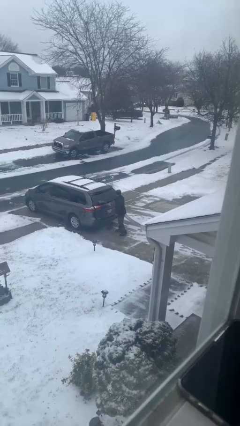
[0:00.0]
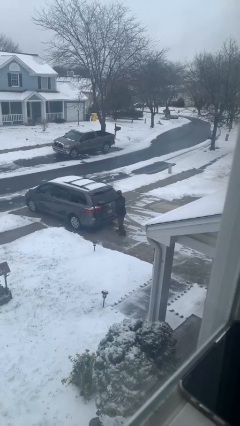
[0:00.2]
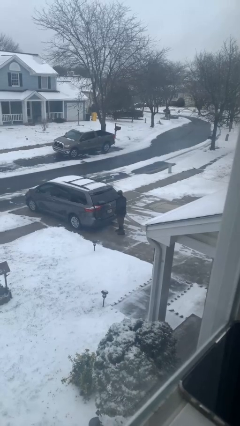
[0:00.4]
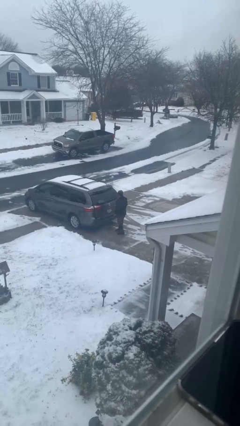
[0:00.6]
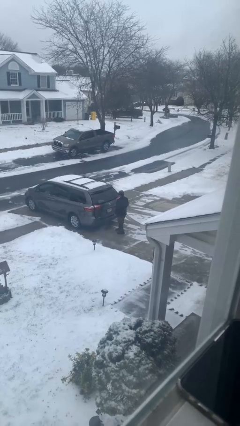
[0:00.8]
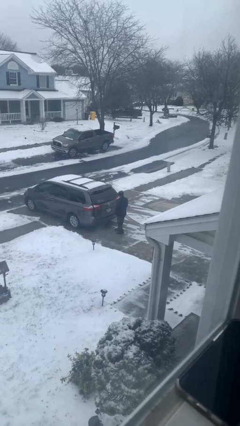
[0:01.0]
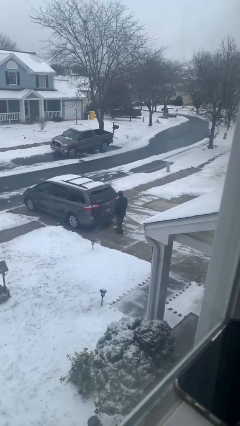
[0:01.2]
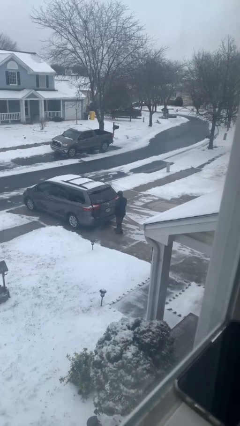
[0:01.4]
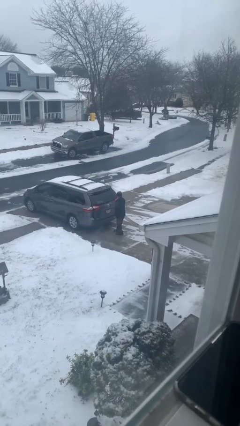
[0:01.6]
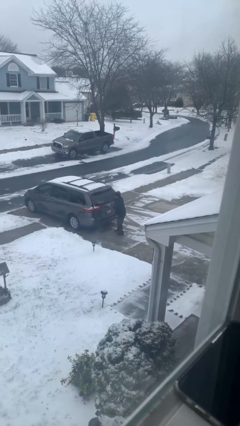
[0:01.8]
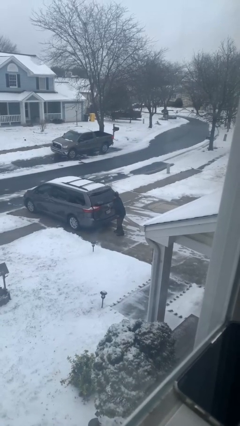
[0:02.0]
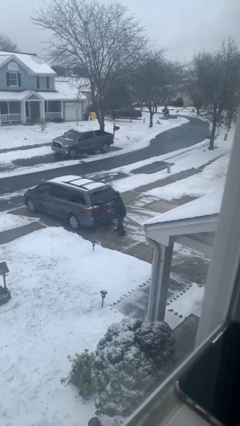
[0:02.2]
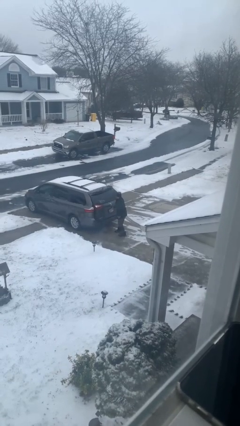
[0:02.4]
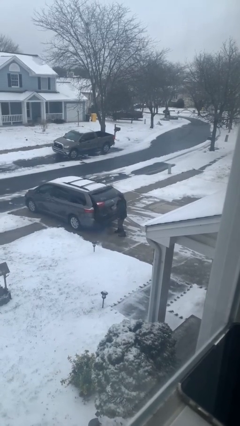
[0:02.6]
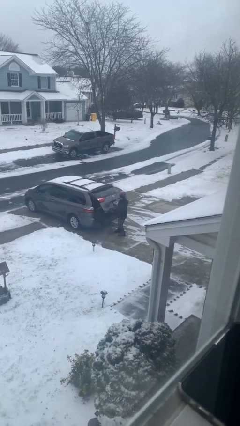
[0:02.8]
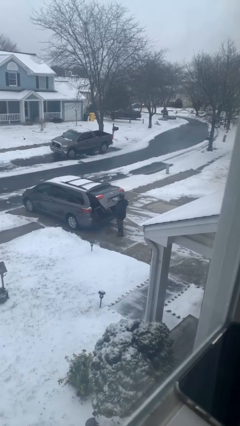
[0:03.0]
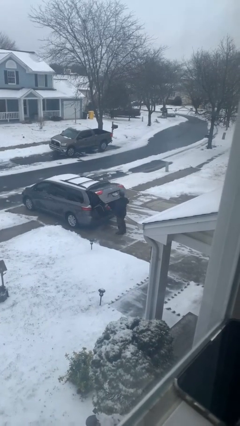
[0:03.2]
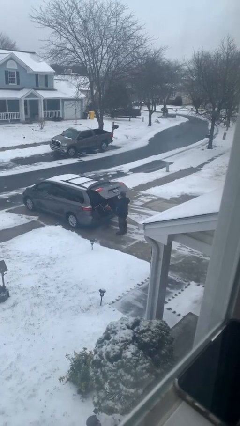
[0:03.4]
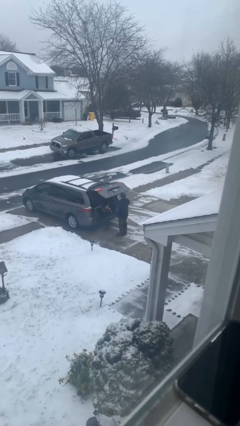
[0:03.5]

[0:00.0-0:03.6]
person opens car trunk

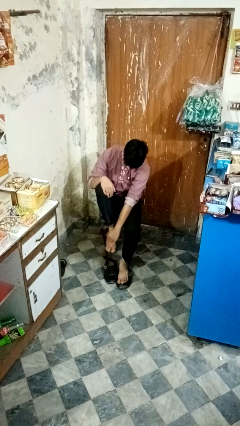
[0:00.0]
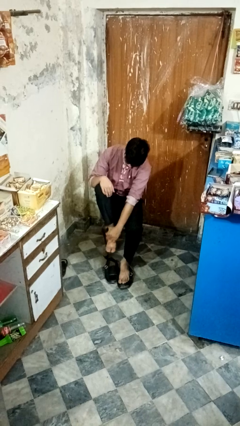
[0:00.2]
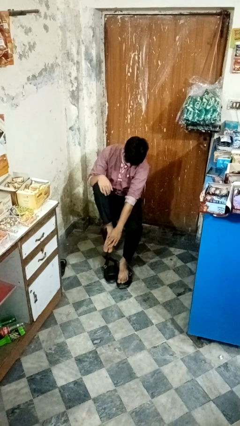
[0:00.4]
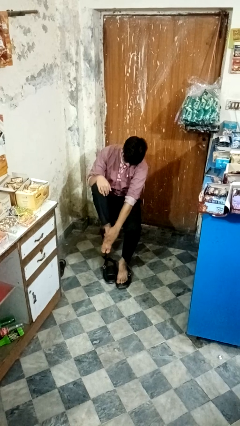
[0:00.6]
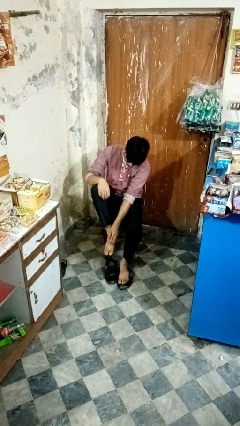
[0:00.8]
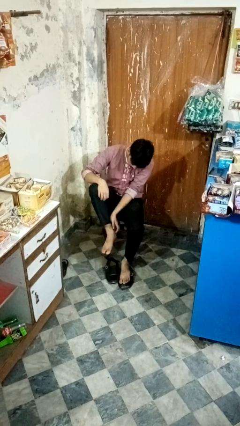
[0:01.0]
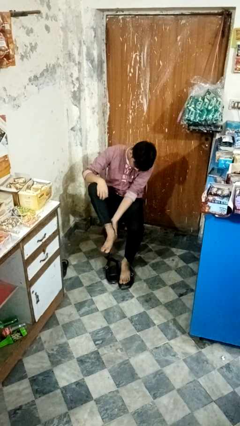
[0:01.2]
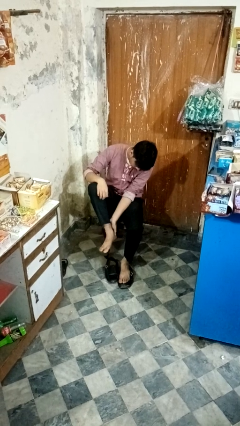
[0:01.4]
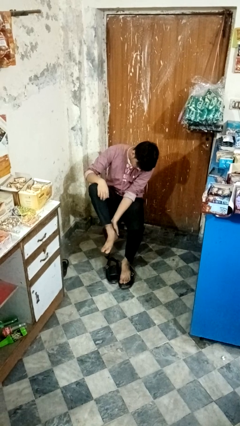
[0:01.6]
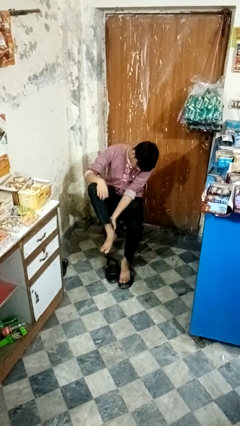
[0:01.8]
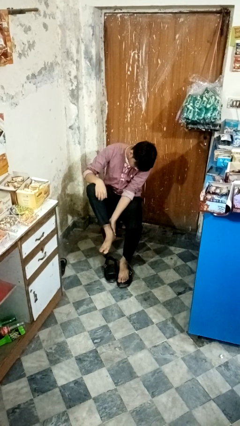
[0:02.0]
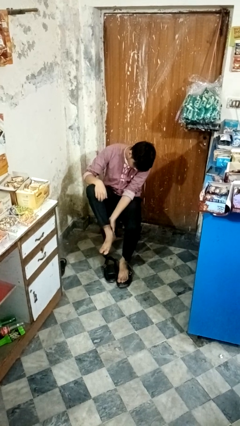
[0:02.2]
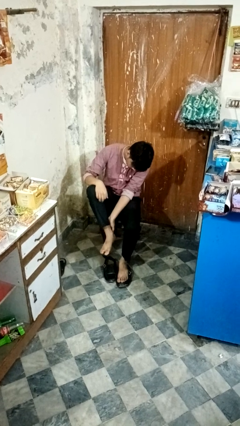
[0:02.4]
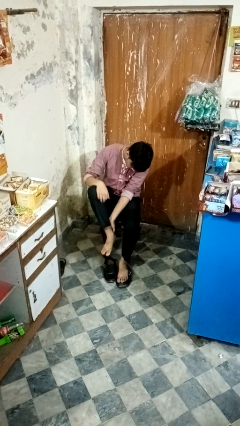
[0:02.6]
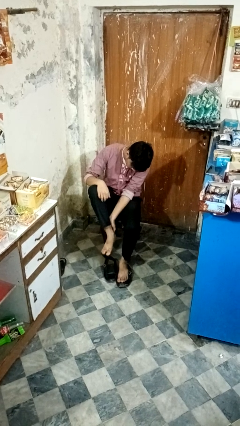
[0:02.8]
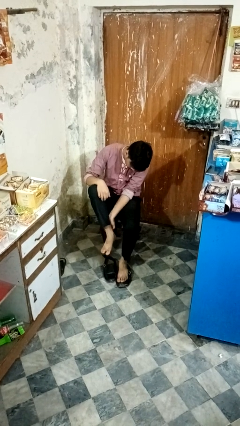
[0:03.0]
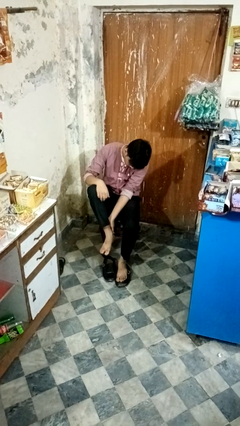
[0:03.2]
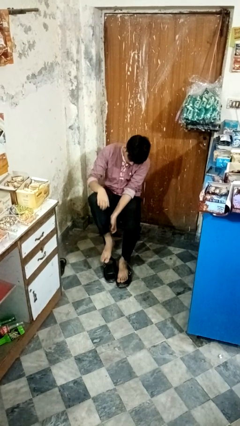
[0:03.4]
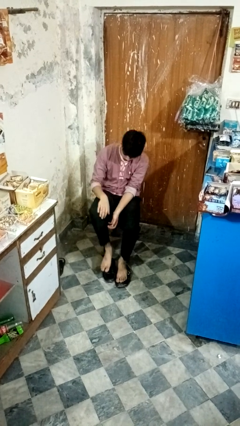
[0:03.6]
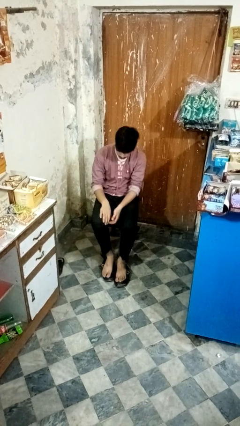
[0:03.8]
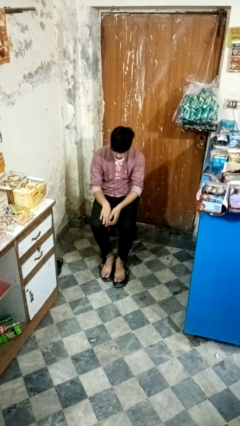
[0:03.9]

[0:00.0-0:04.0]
person rubs foot

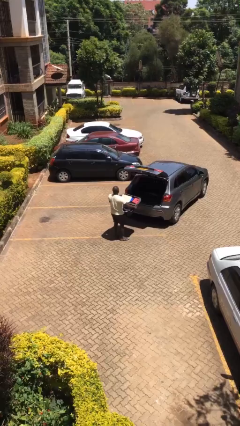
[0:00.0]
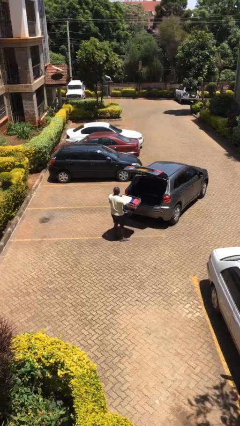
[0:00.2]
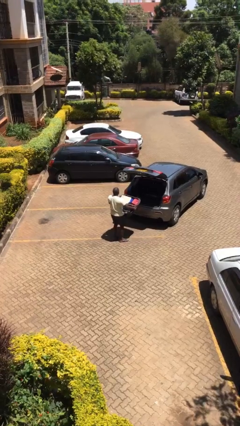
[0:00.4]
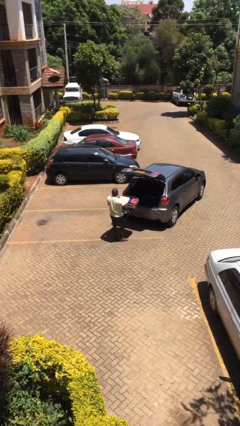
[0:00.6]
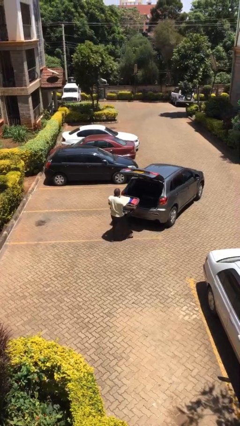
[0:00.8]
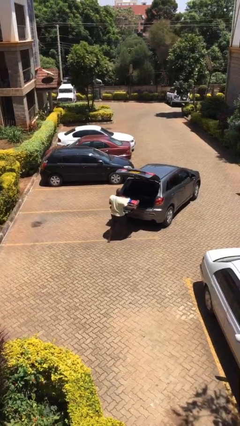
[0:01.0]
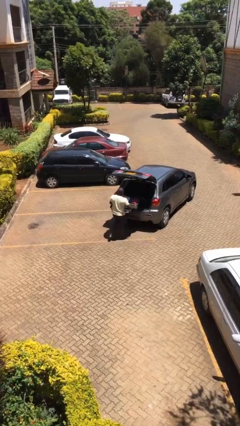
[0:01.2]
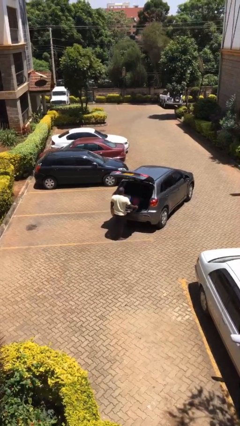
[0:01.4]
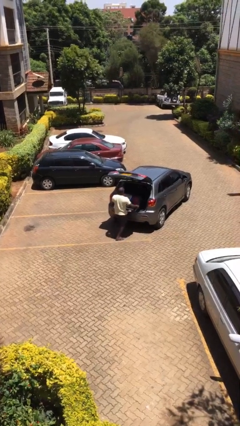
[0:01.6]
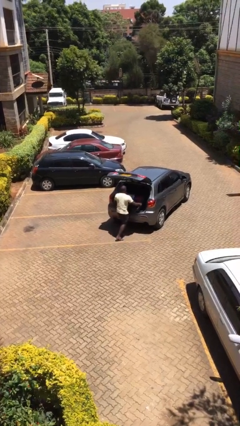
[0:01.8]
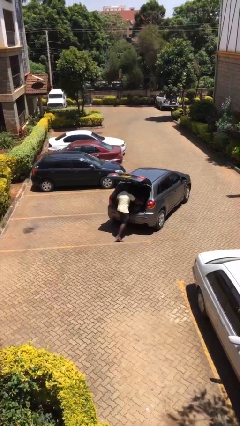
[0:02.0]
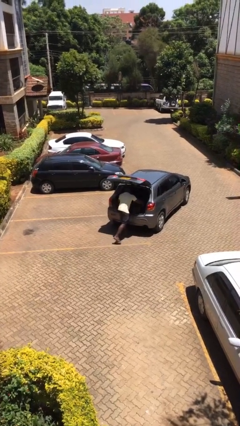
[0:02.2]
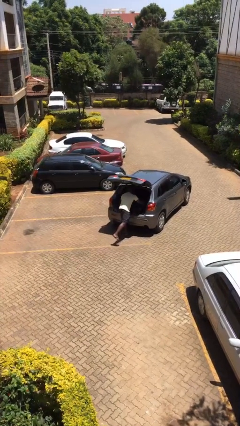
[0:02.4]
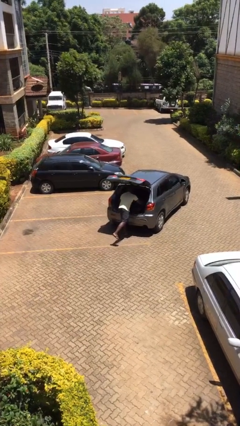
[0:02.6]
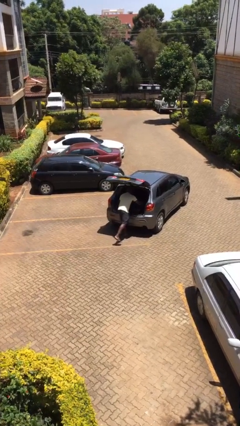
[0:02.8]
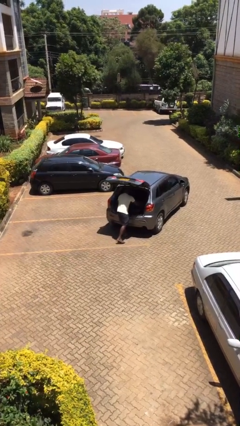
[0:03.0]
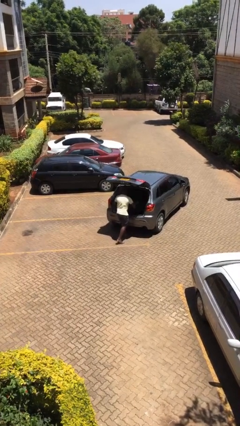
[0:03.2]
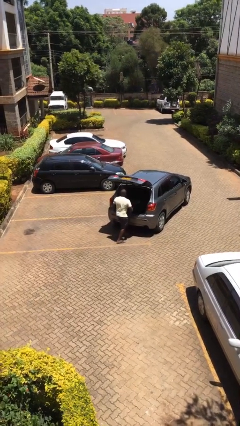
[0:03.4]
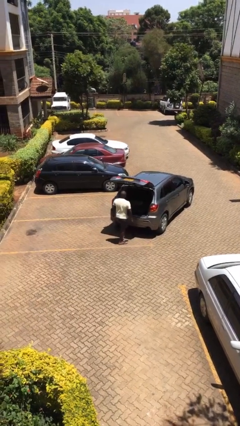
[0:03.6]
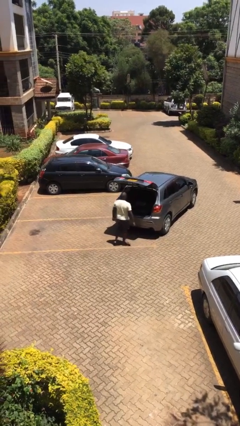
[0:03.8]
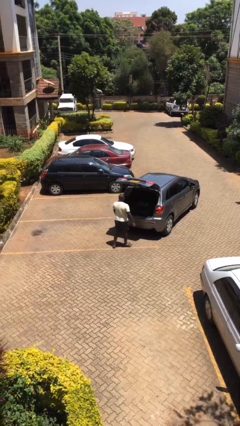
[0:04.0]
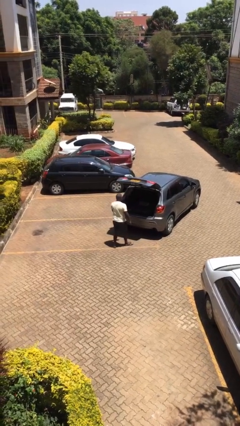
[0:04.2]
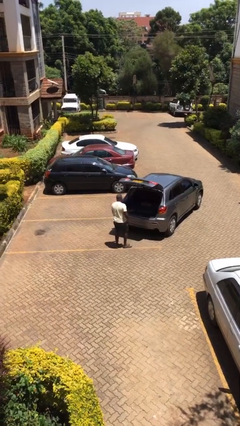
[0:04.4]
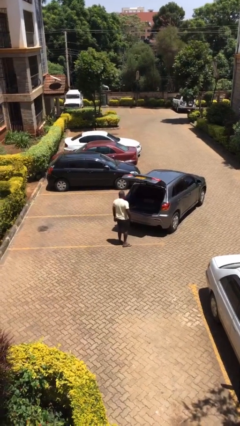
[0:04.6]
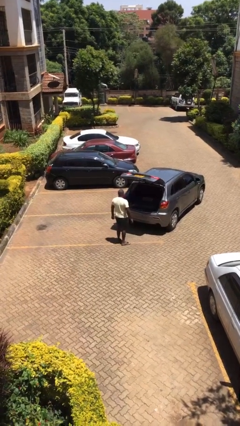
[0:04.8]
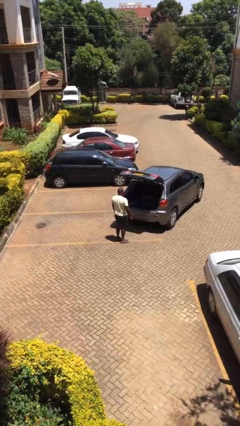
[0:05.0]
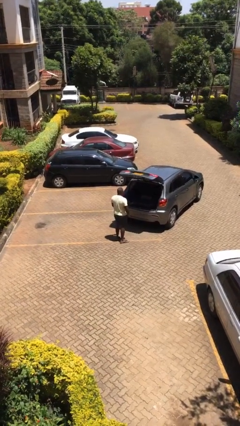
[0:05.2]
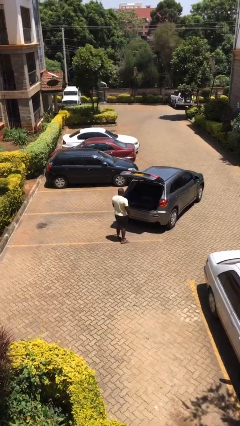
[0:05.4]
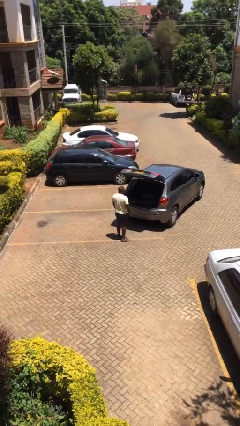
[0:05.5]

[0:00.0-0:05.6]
person loads car

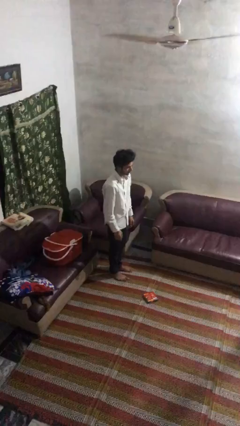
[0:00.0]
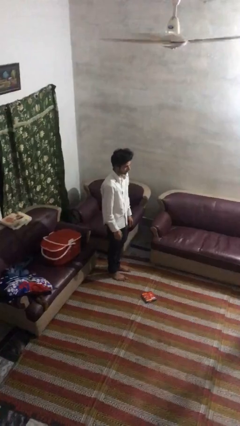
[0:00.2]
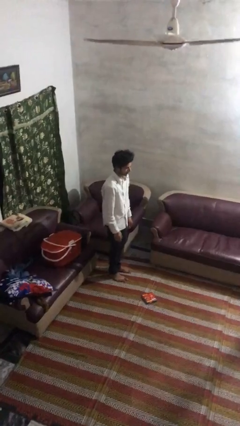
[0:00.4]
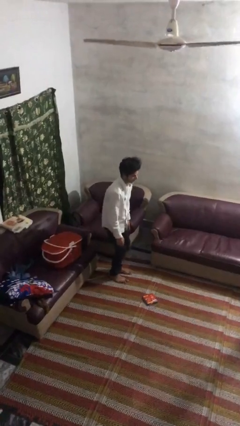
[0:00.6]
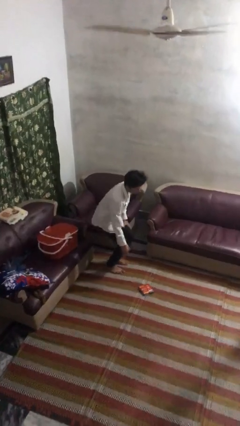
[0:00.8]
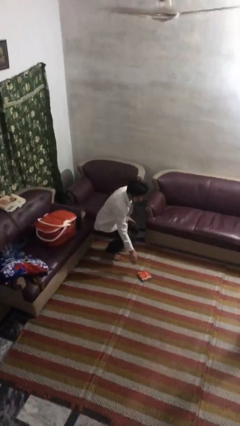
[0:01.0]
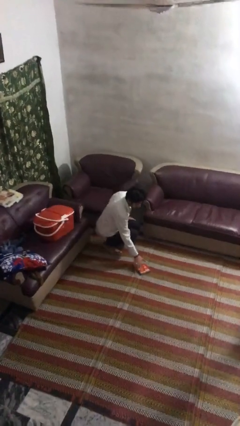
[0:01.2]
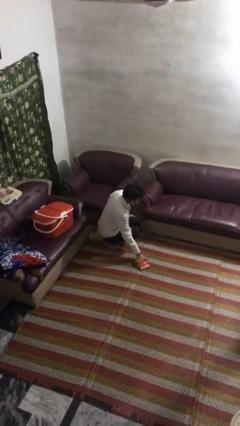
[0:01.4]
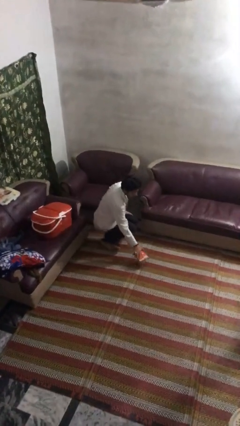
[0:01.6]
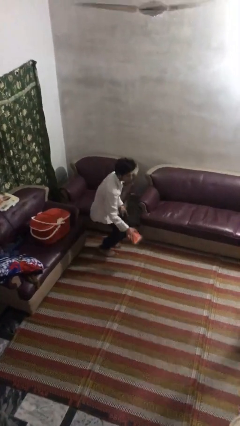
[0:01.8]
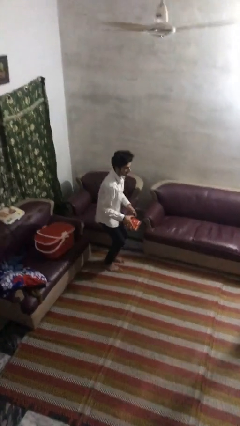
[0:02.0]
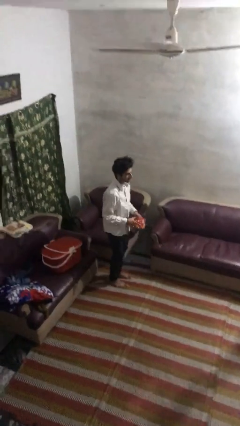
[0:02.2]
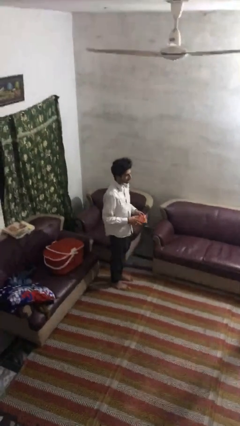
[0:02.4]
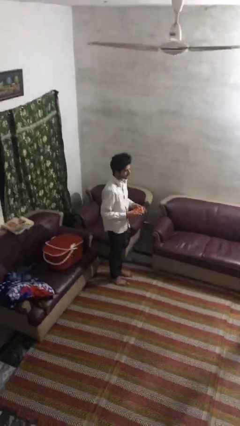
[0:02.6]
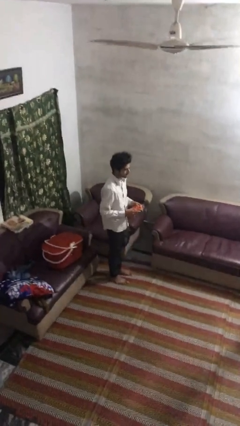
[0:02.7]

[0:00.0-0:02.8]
person picks up object from floor

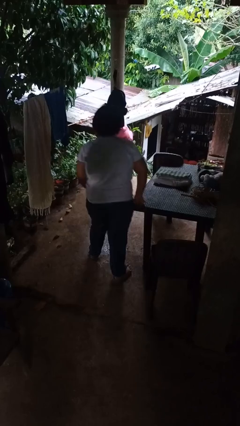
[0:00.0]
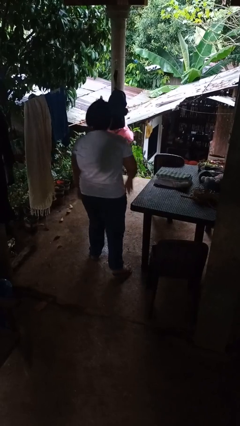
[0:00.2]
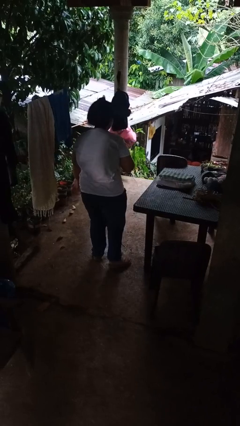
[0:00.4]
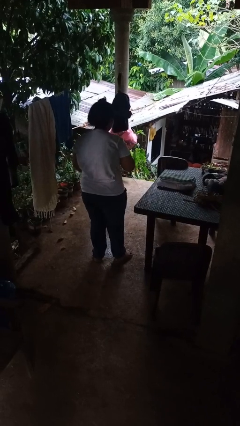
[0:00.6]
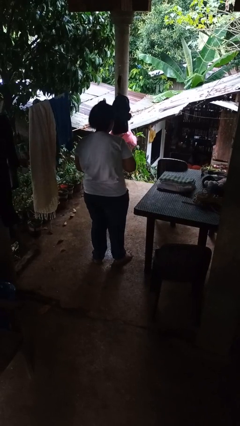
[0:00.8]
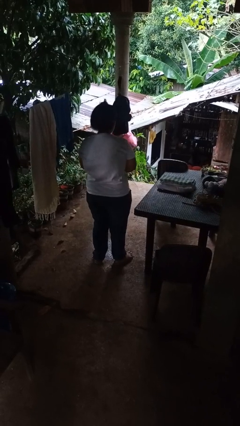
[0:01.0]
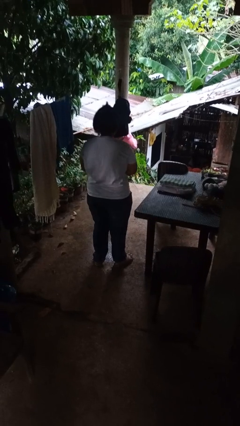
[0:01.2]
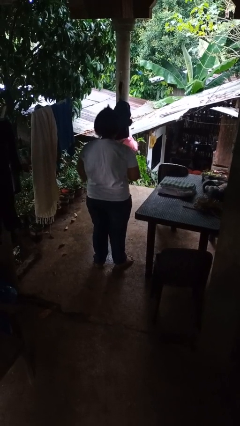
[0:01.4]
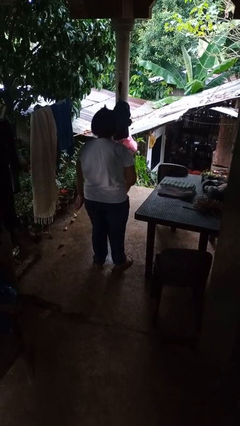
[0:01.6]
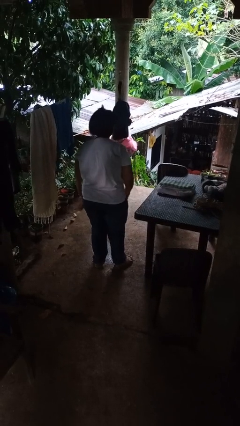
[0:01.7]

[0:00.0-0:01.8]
person bumps into table
